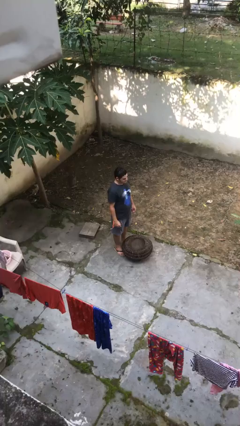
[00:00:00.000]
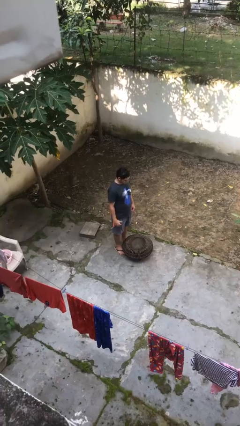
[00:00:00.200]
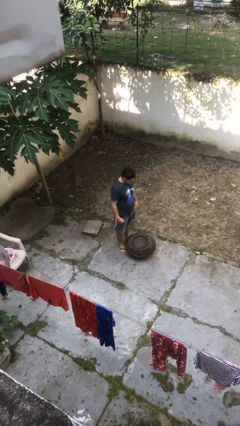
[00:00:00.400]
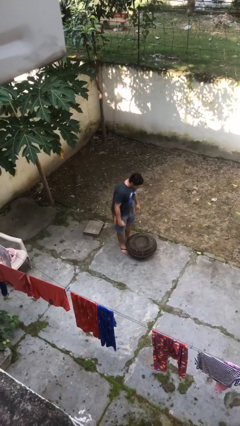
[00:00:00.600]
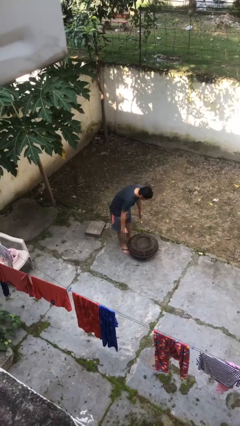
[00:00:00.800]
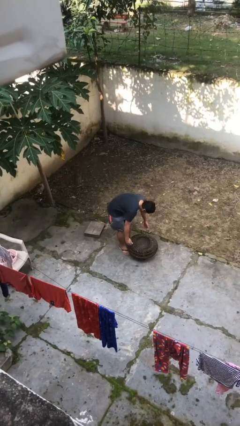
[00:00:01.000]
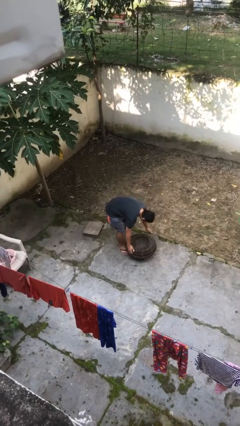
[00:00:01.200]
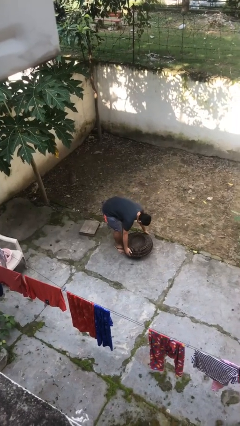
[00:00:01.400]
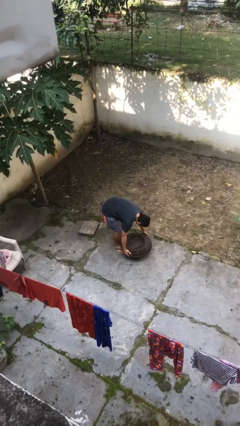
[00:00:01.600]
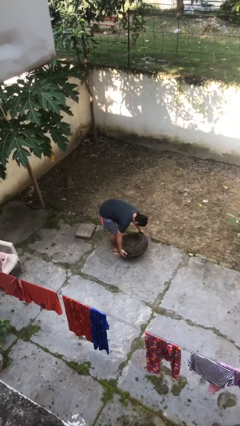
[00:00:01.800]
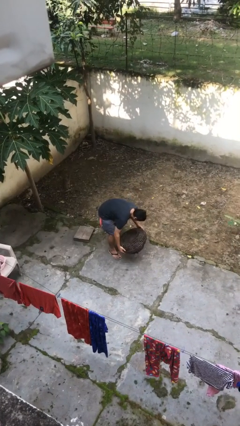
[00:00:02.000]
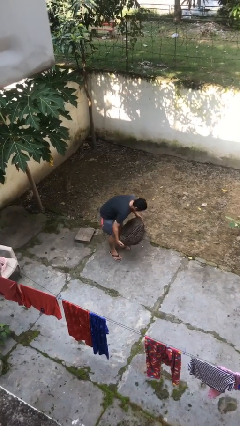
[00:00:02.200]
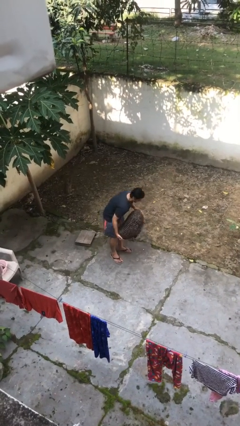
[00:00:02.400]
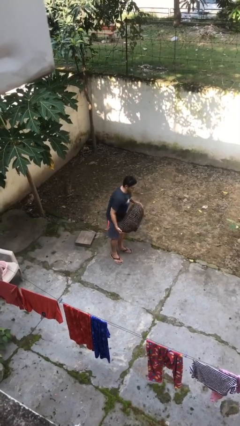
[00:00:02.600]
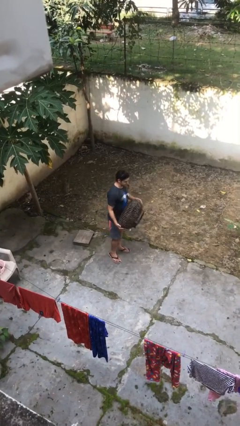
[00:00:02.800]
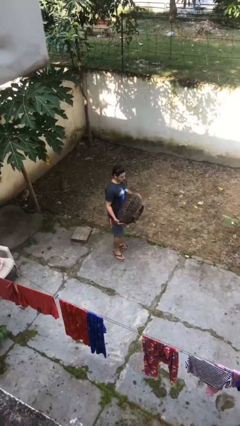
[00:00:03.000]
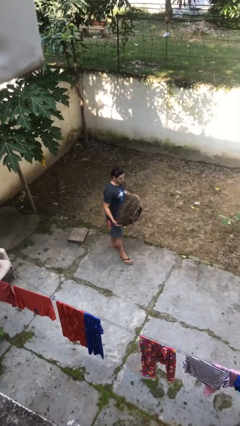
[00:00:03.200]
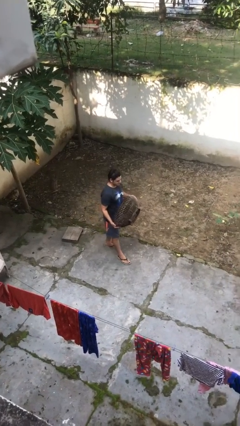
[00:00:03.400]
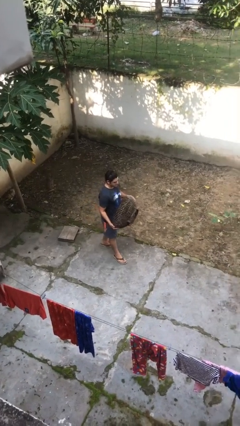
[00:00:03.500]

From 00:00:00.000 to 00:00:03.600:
person picks up object from floor

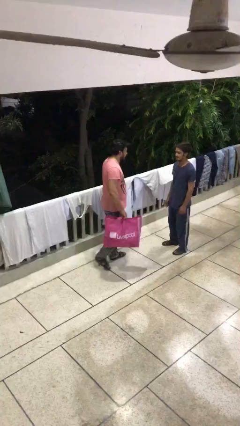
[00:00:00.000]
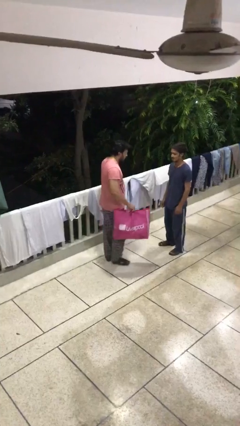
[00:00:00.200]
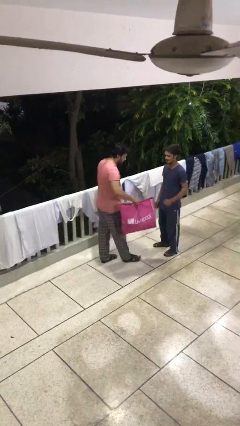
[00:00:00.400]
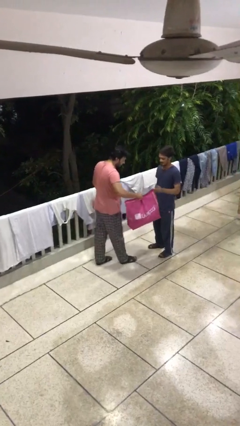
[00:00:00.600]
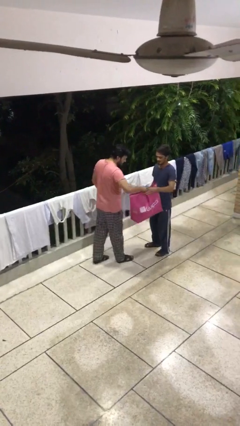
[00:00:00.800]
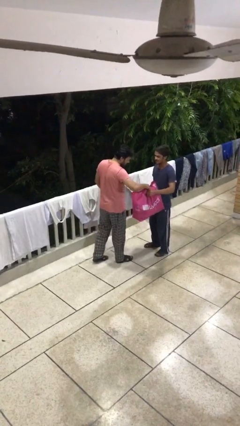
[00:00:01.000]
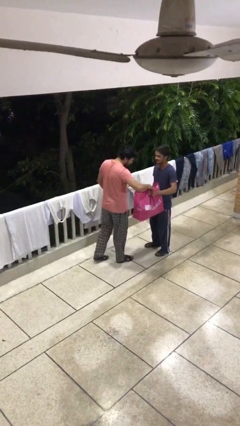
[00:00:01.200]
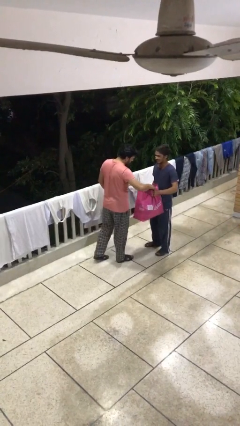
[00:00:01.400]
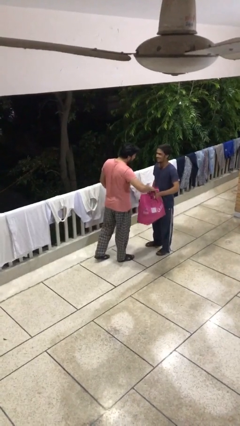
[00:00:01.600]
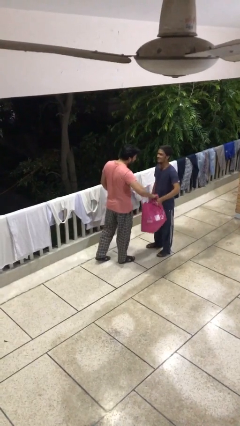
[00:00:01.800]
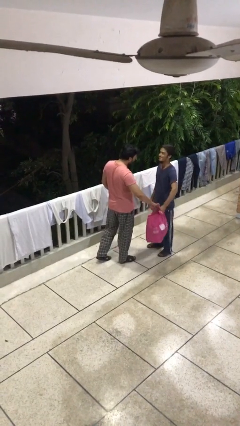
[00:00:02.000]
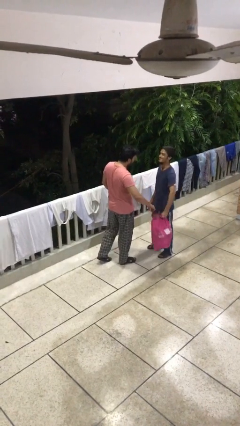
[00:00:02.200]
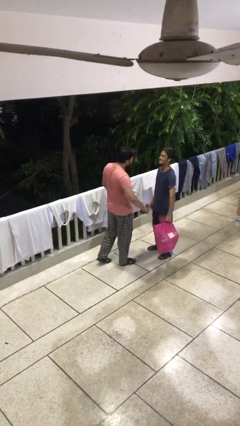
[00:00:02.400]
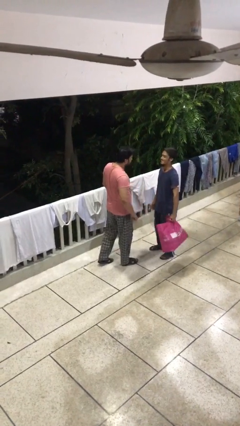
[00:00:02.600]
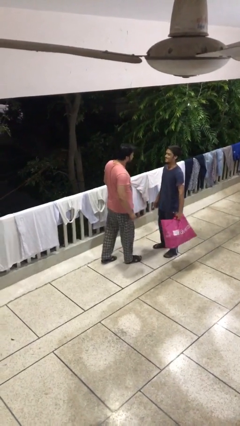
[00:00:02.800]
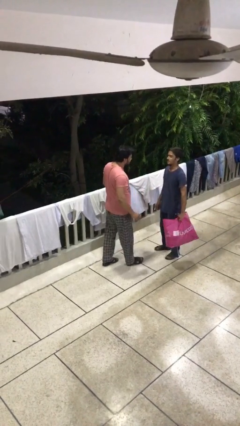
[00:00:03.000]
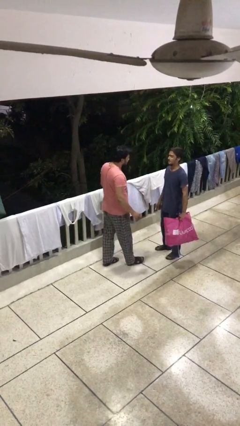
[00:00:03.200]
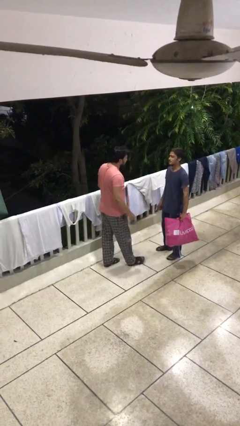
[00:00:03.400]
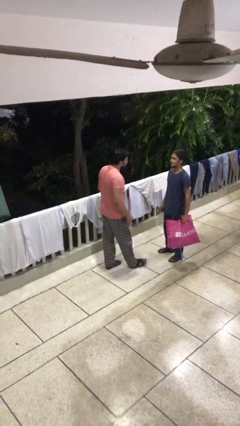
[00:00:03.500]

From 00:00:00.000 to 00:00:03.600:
person transfers object to person

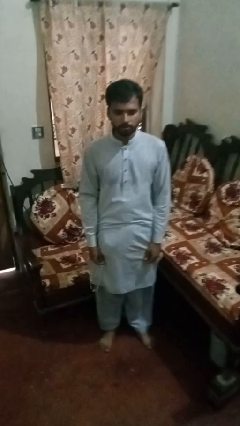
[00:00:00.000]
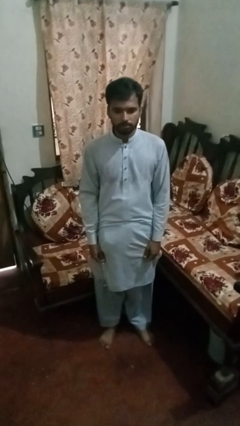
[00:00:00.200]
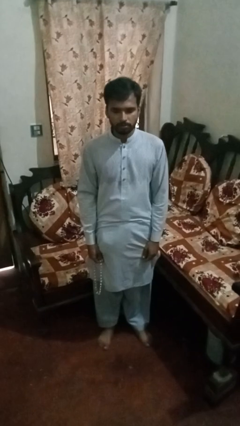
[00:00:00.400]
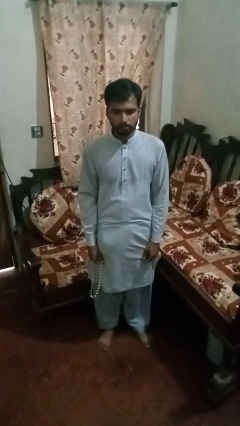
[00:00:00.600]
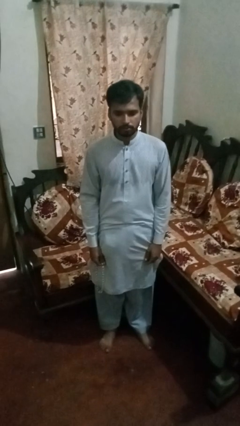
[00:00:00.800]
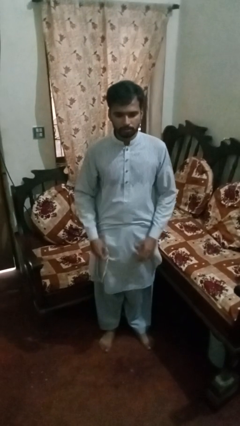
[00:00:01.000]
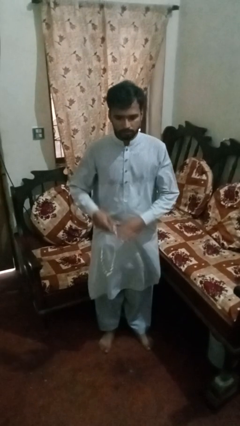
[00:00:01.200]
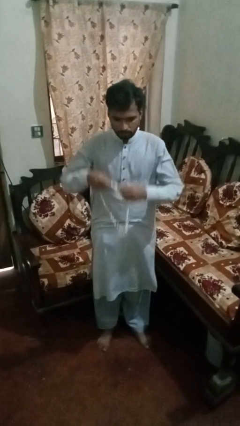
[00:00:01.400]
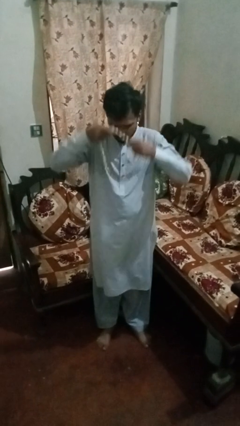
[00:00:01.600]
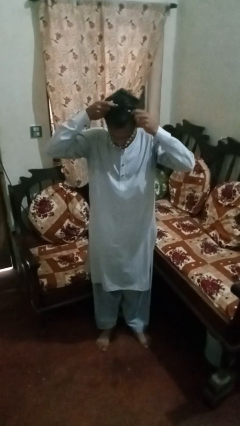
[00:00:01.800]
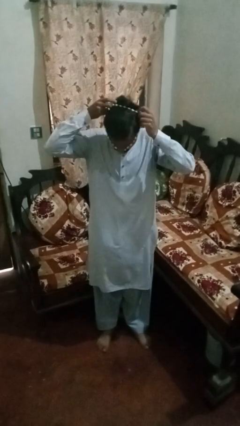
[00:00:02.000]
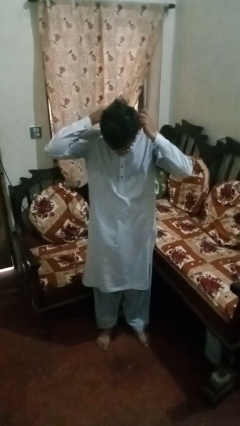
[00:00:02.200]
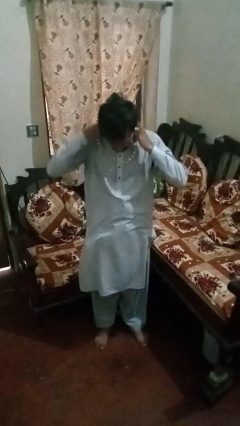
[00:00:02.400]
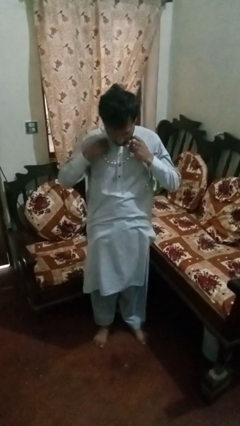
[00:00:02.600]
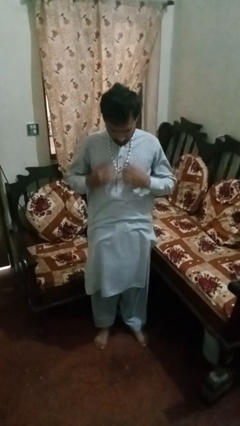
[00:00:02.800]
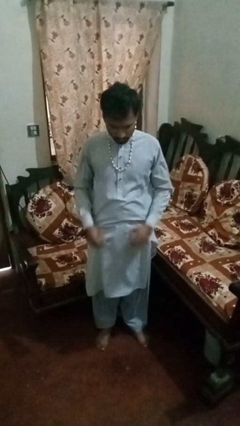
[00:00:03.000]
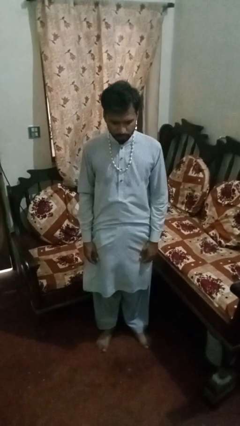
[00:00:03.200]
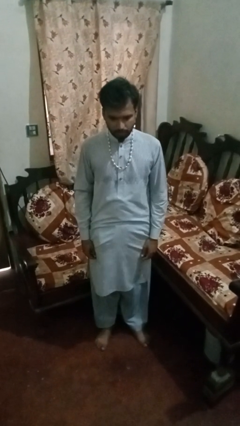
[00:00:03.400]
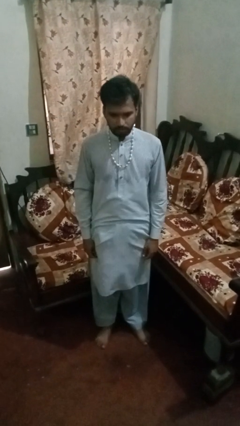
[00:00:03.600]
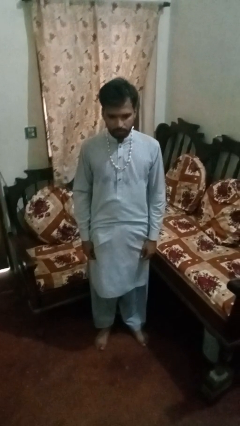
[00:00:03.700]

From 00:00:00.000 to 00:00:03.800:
person puts on necklace

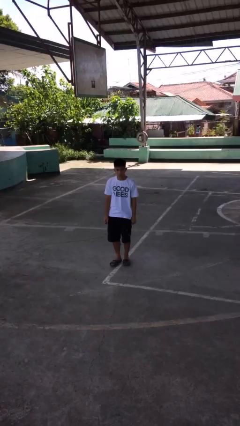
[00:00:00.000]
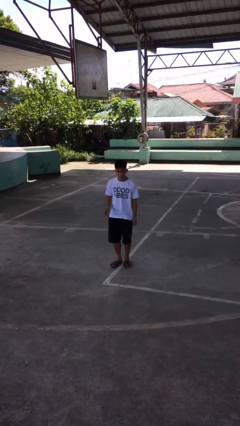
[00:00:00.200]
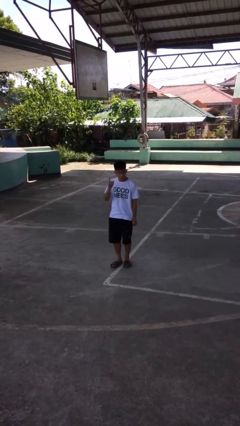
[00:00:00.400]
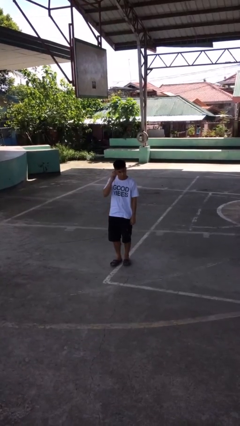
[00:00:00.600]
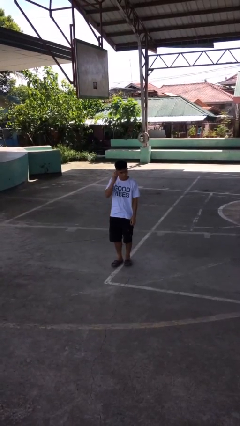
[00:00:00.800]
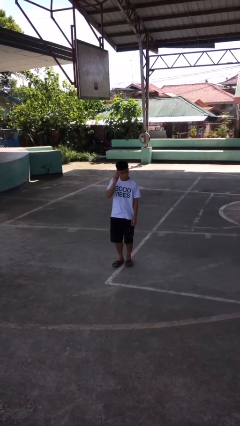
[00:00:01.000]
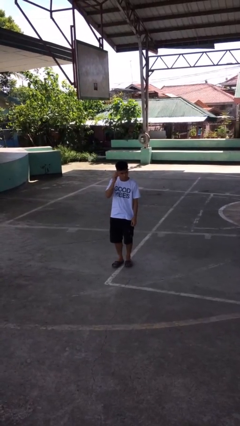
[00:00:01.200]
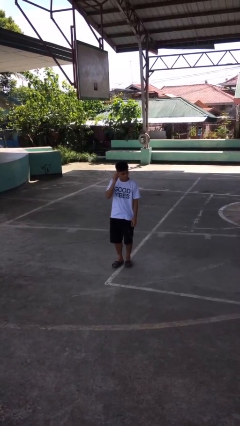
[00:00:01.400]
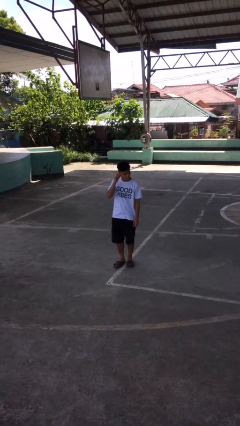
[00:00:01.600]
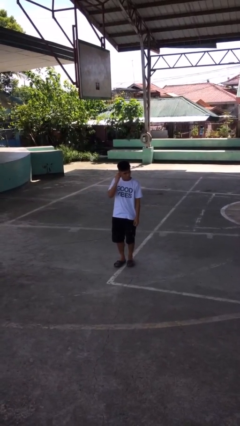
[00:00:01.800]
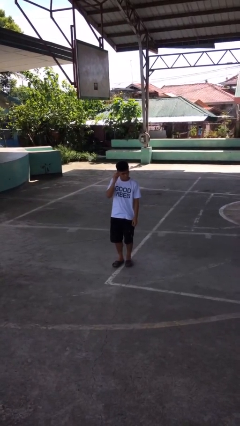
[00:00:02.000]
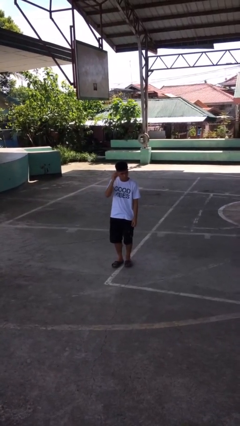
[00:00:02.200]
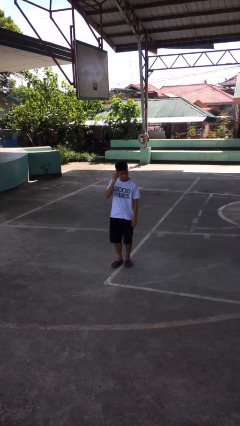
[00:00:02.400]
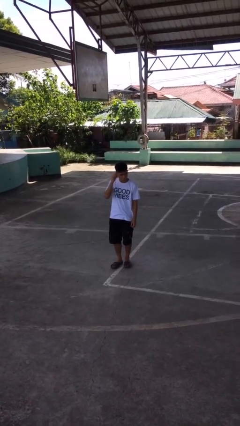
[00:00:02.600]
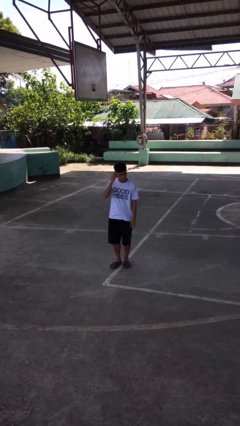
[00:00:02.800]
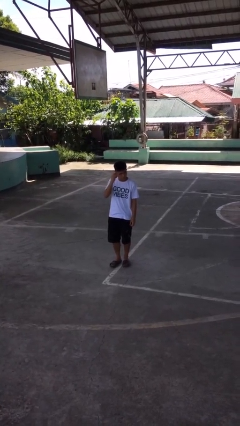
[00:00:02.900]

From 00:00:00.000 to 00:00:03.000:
person touches earlobe

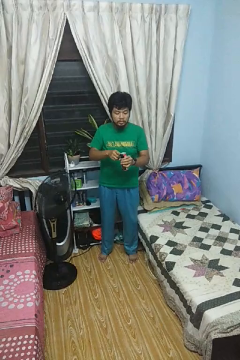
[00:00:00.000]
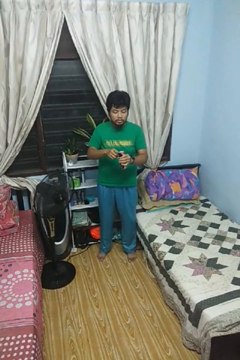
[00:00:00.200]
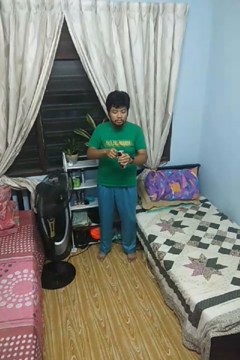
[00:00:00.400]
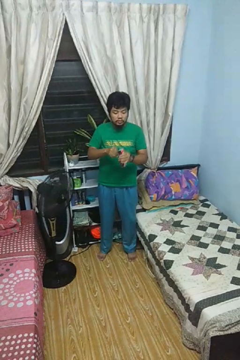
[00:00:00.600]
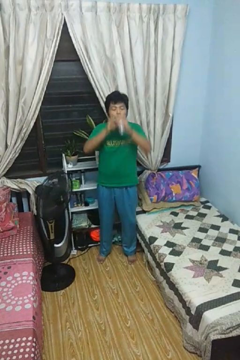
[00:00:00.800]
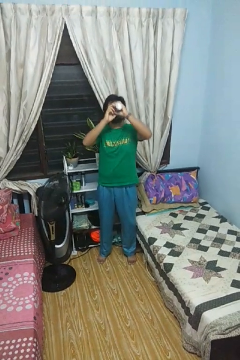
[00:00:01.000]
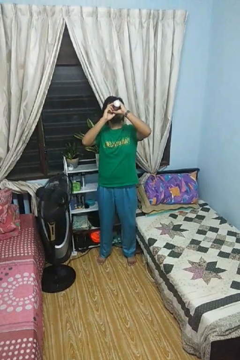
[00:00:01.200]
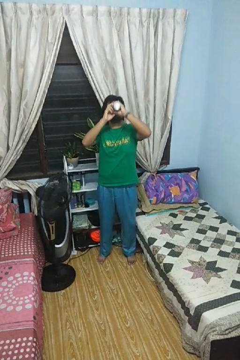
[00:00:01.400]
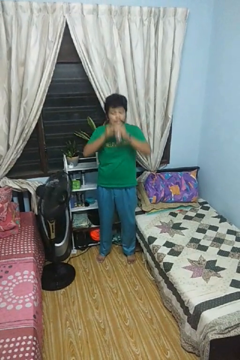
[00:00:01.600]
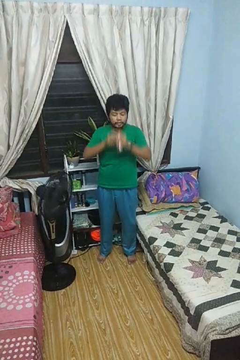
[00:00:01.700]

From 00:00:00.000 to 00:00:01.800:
person drinks from beverage can

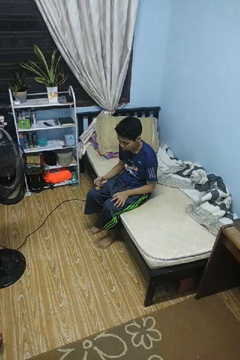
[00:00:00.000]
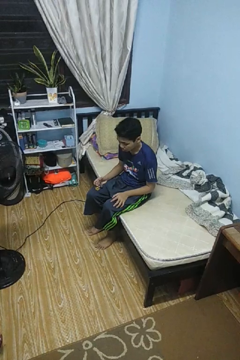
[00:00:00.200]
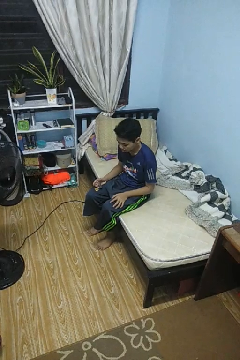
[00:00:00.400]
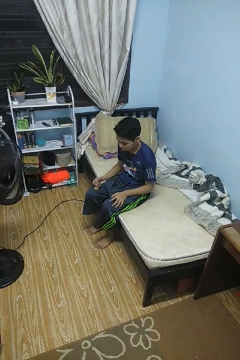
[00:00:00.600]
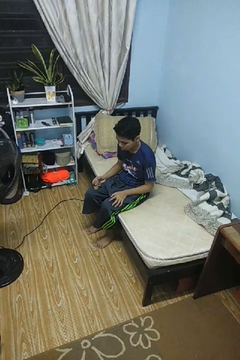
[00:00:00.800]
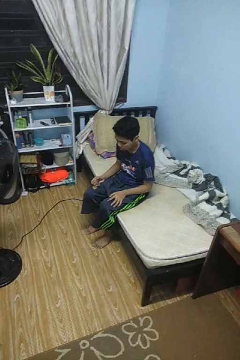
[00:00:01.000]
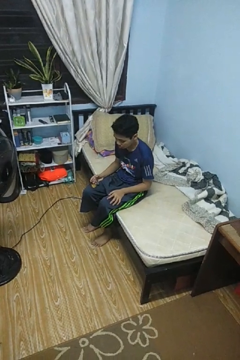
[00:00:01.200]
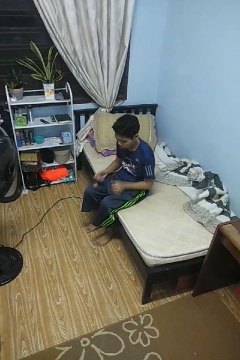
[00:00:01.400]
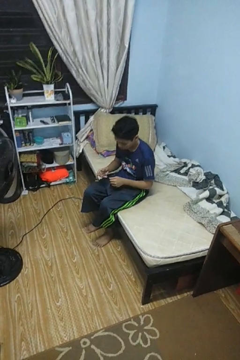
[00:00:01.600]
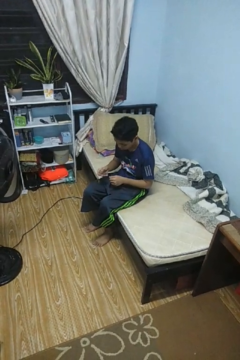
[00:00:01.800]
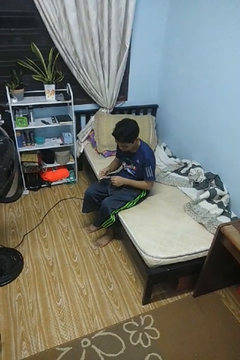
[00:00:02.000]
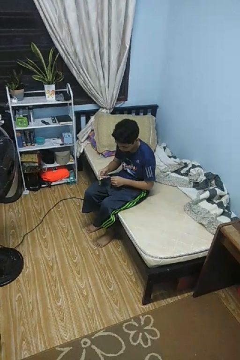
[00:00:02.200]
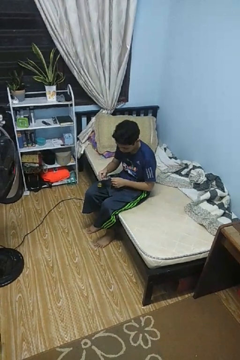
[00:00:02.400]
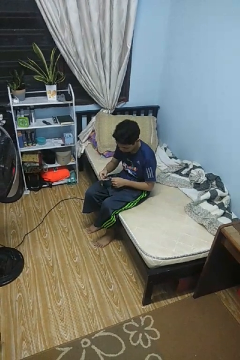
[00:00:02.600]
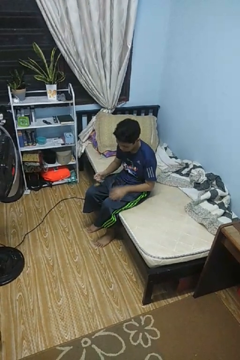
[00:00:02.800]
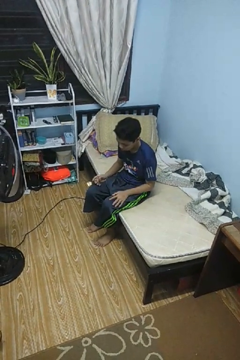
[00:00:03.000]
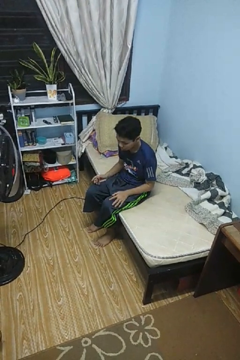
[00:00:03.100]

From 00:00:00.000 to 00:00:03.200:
person clips fingernails
